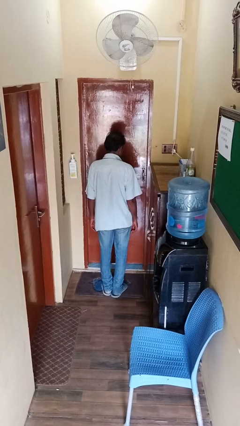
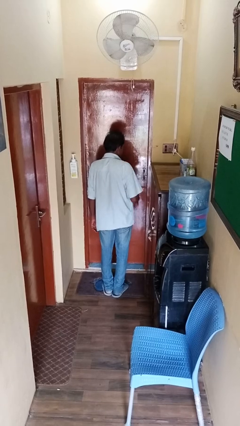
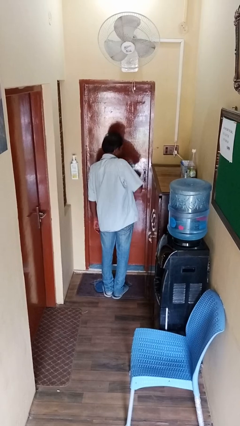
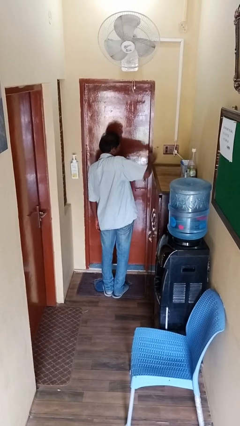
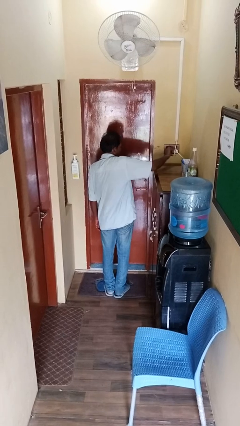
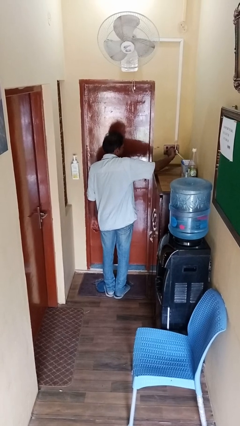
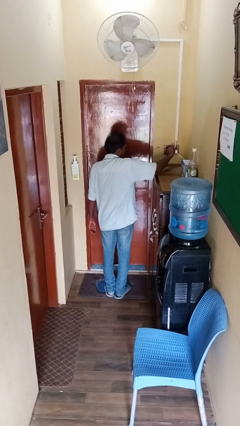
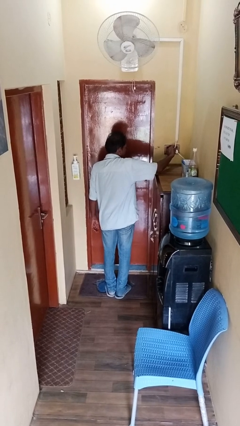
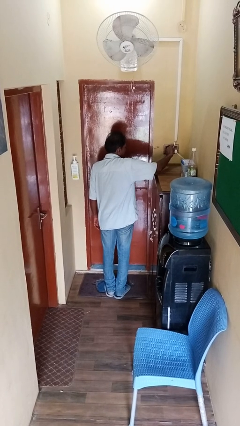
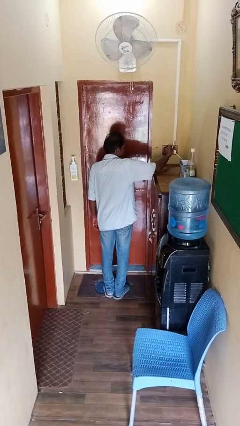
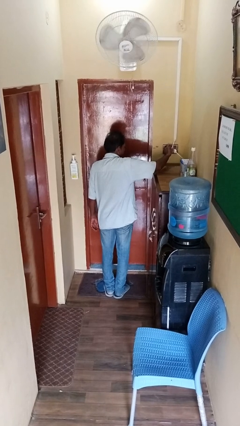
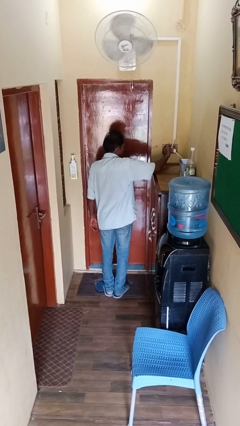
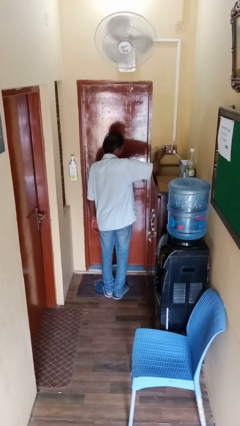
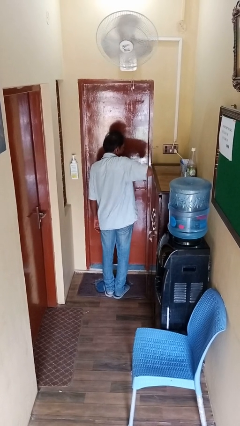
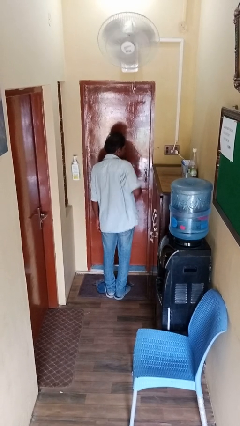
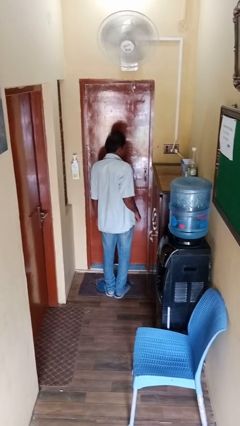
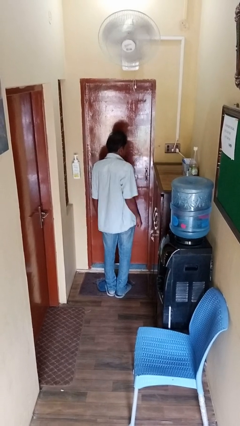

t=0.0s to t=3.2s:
person turns on fan

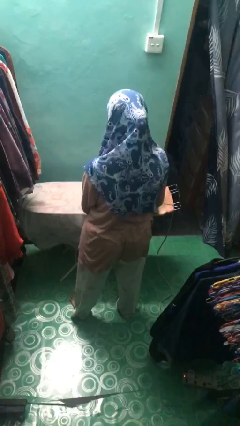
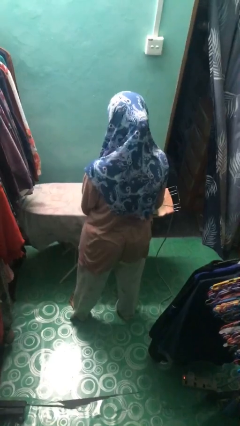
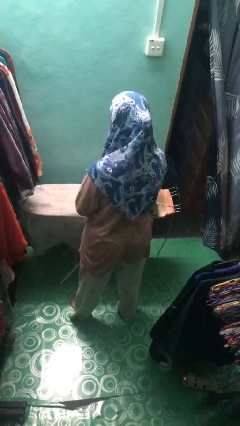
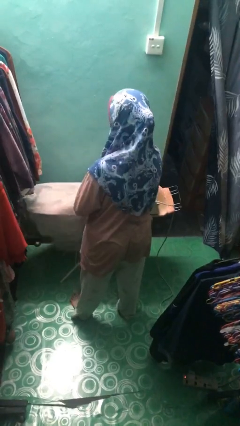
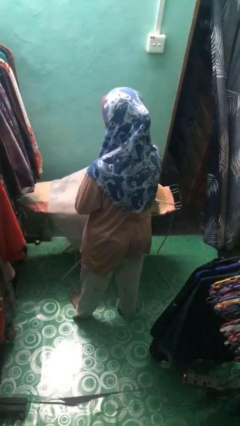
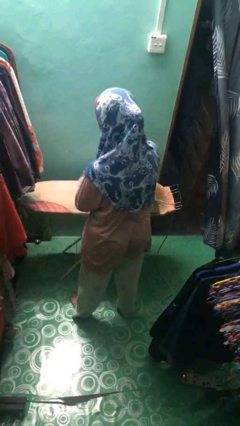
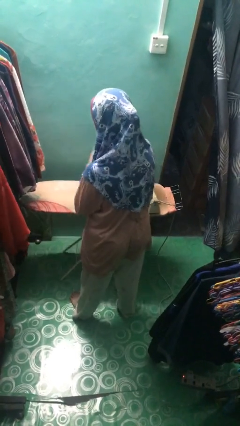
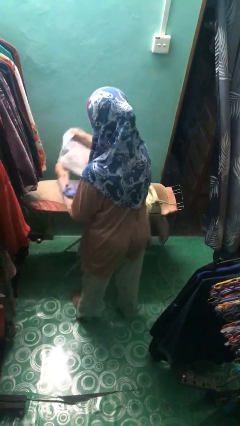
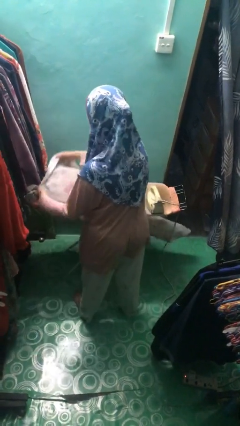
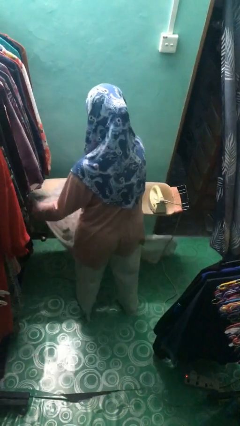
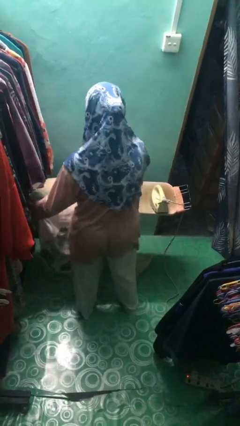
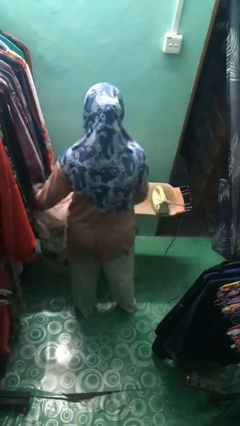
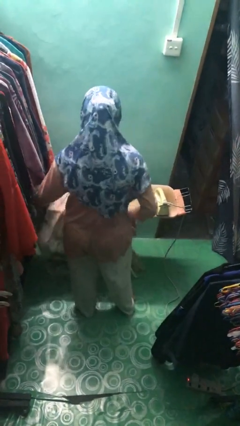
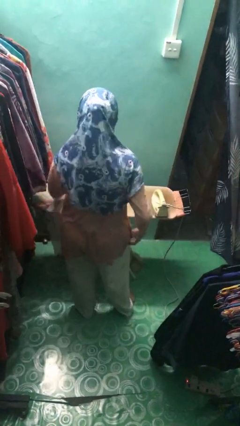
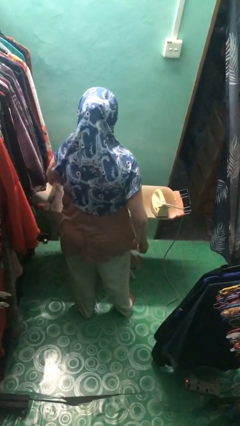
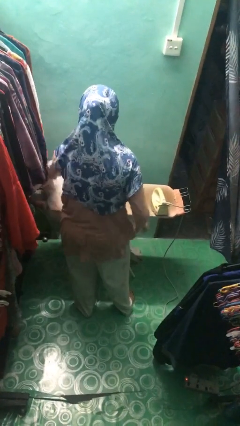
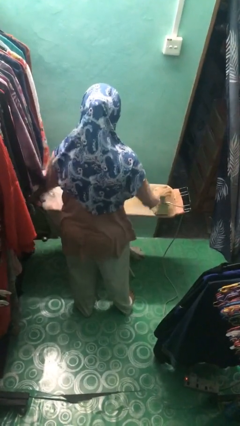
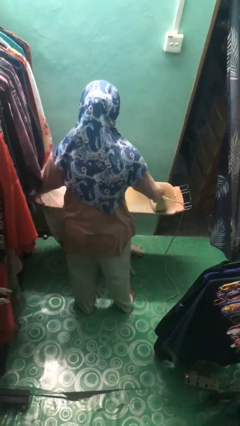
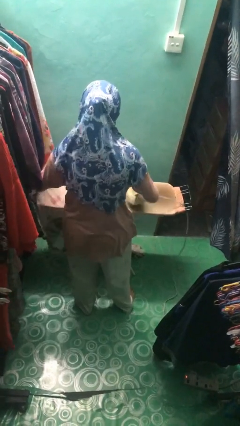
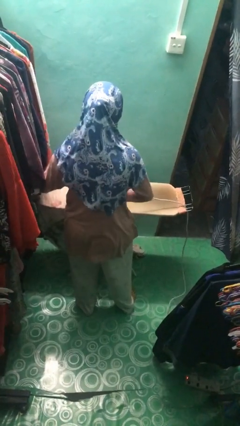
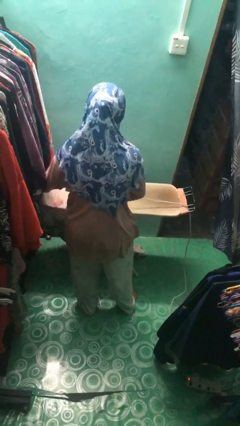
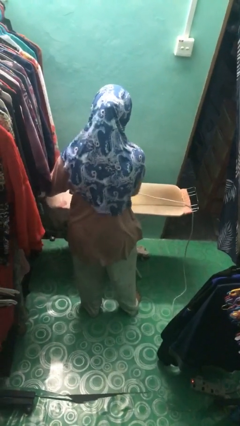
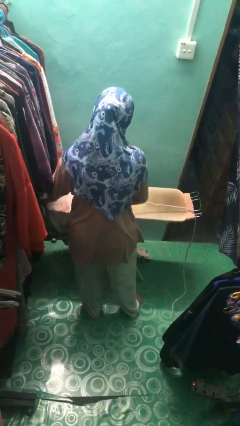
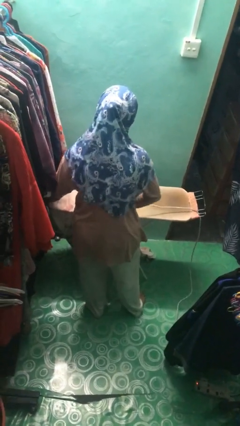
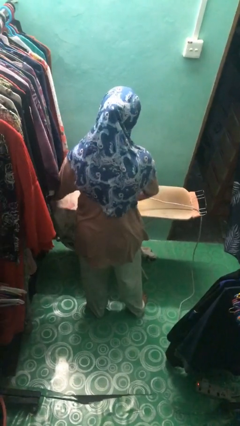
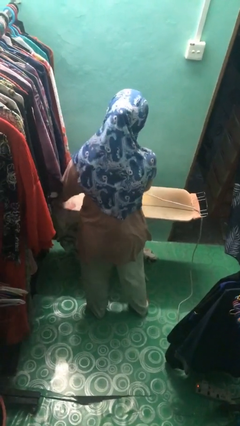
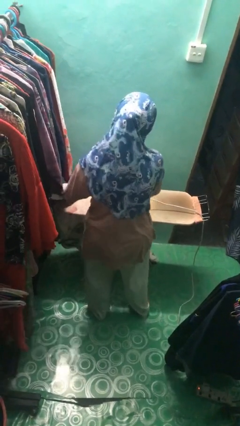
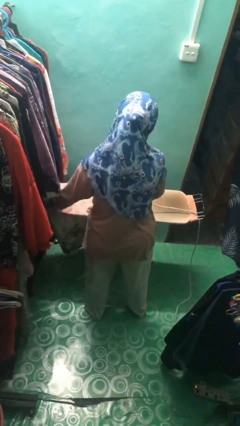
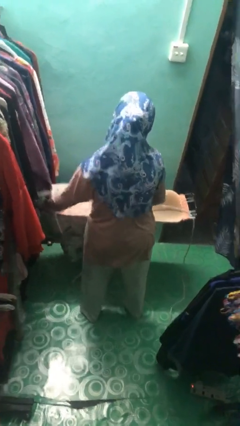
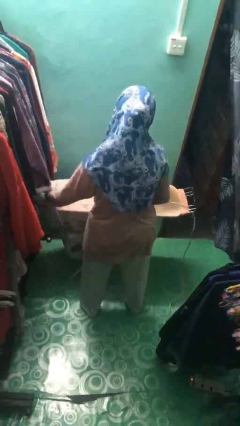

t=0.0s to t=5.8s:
person irons clothes

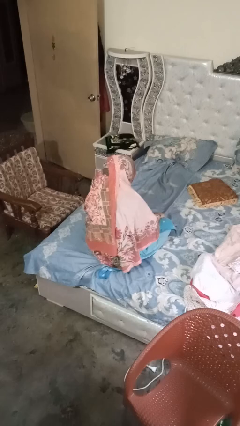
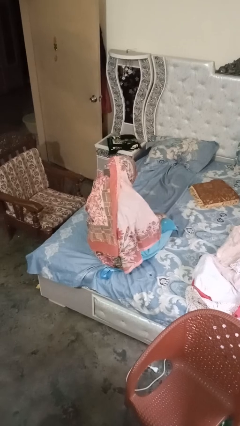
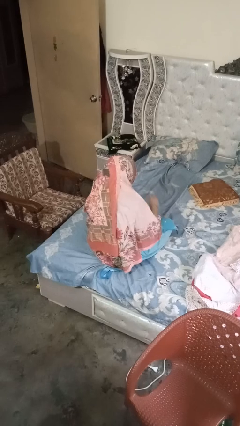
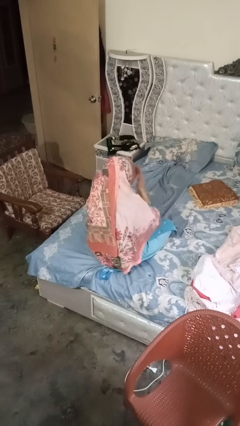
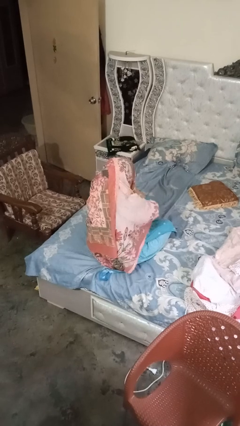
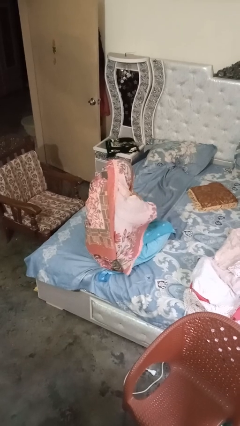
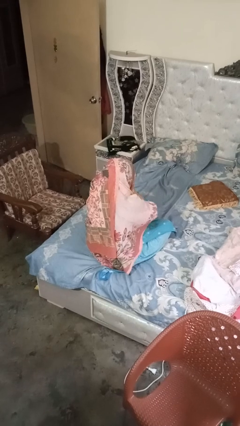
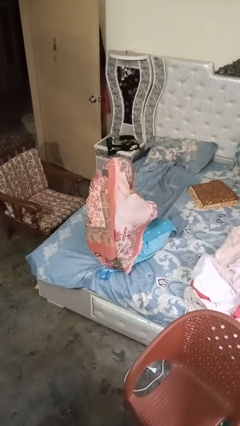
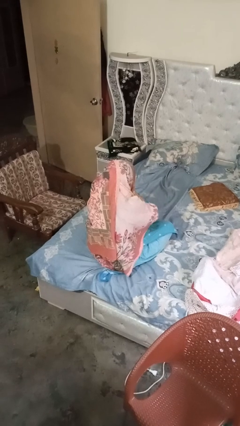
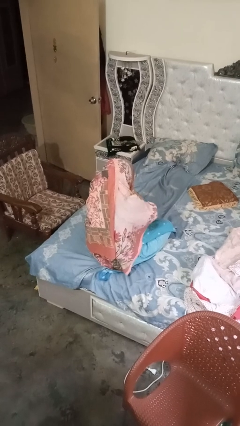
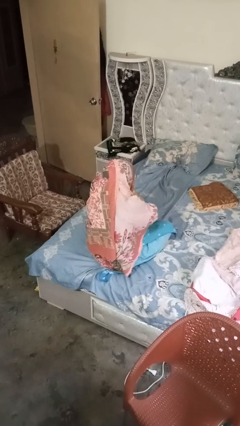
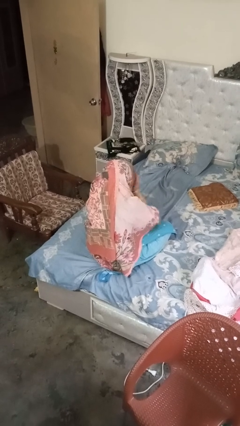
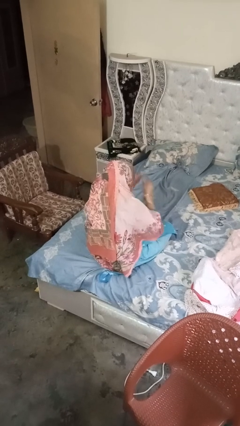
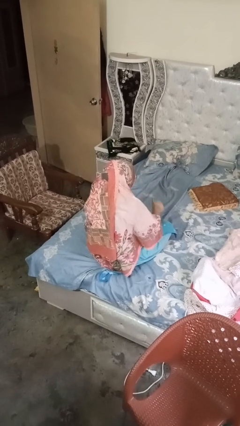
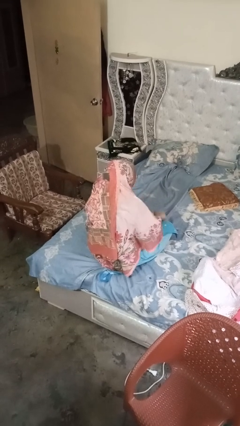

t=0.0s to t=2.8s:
person covers face with hands

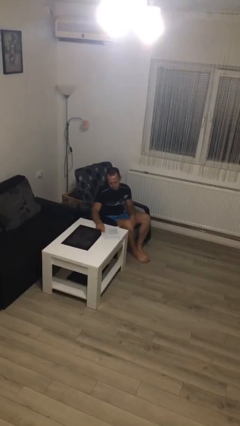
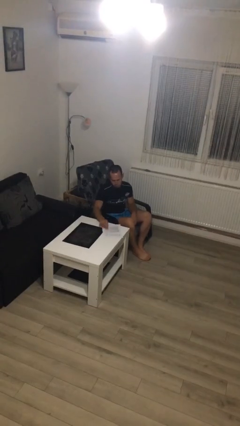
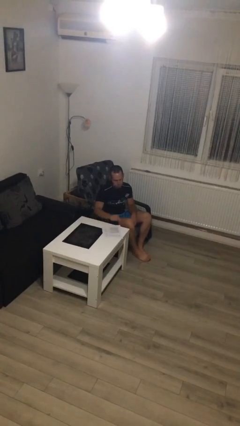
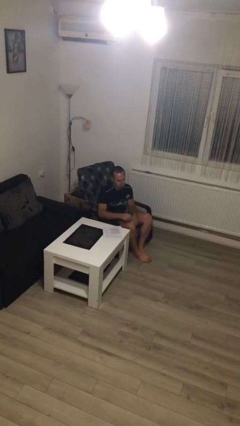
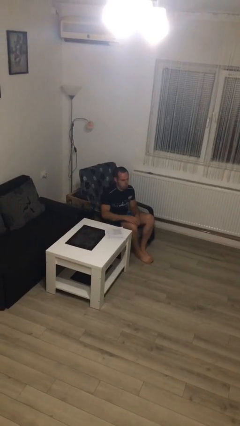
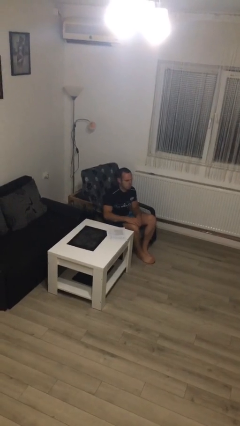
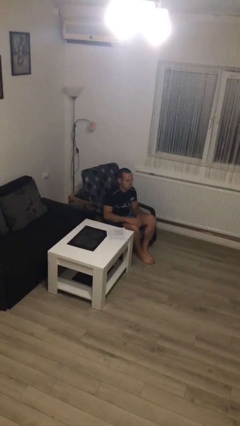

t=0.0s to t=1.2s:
person puts down object on table

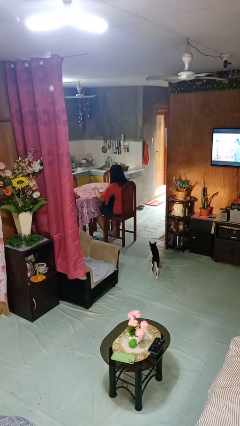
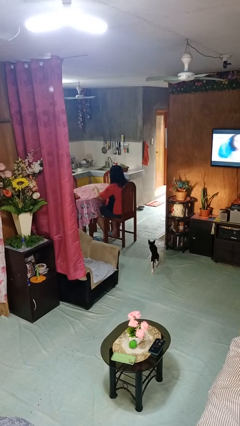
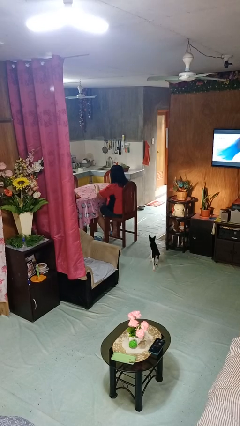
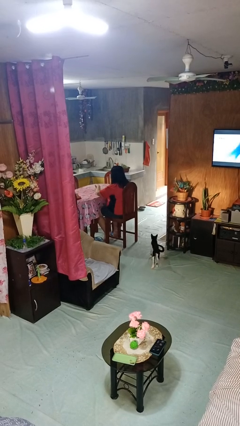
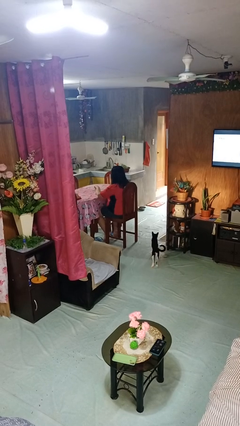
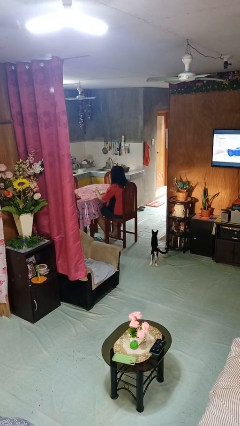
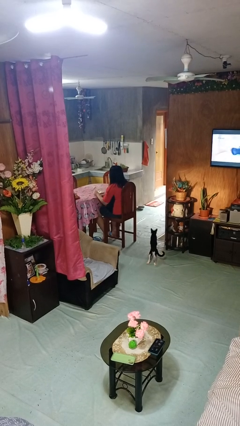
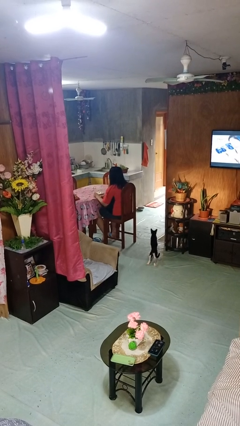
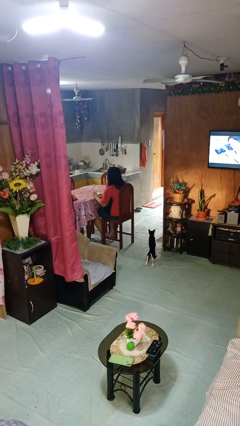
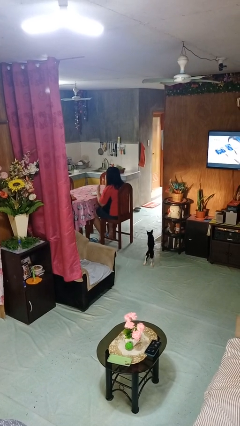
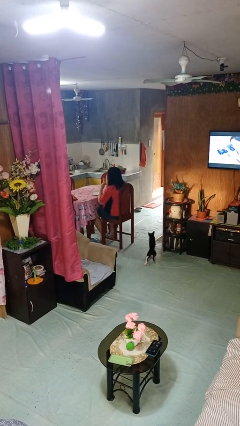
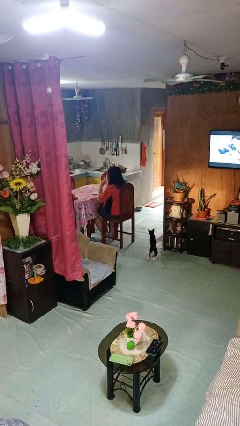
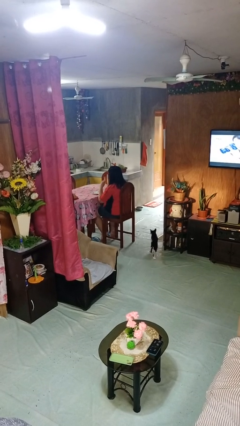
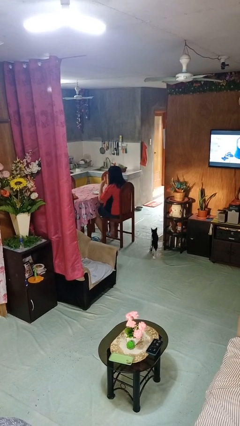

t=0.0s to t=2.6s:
person eats with utensil
